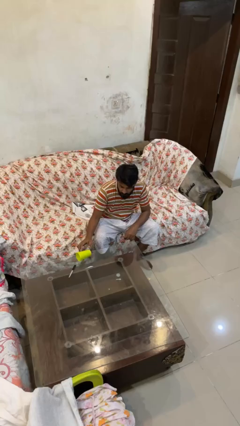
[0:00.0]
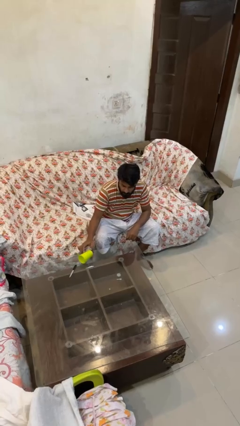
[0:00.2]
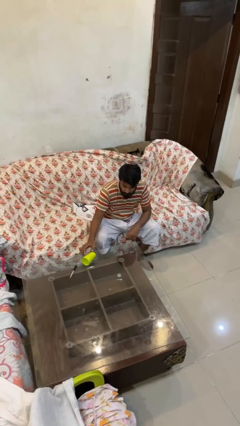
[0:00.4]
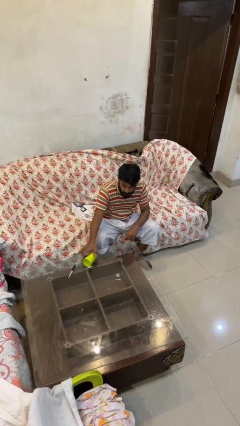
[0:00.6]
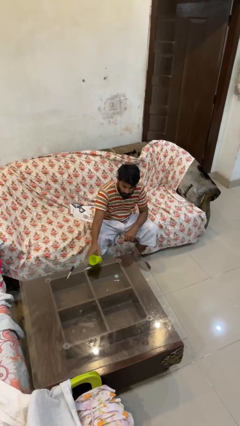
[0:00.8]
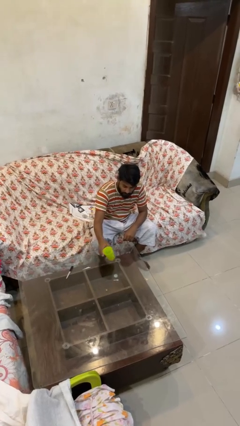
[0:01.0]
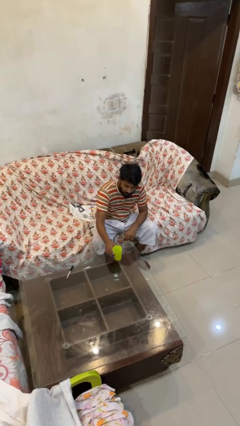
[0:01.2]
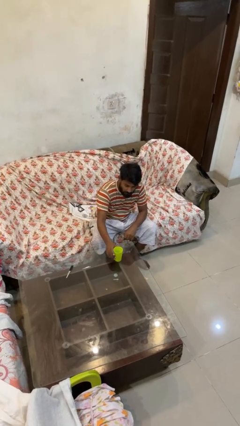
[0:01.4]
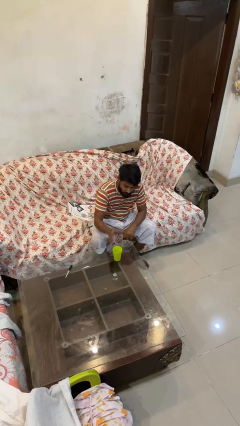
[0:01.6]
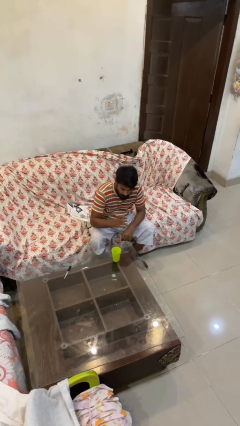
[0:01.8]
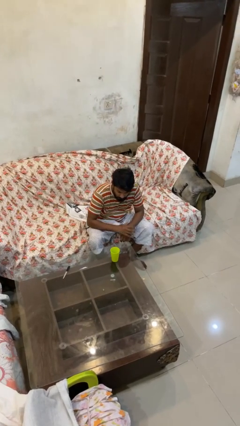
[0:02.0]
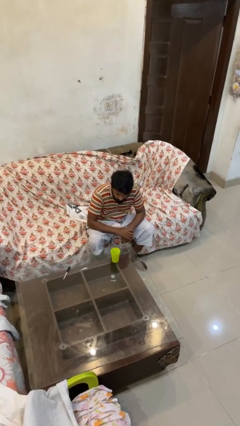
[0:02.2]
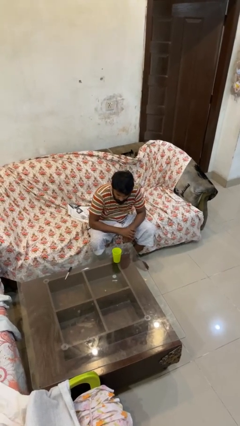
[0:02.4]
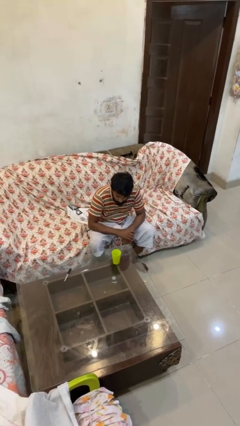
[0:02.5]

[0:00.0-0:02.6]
person sets upright glass

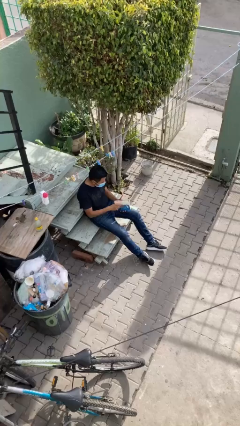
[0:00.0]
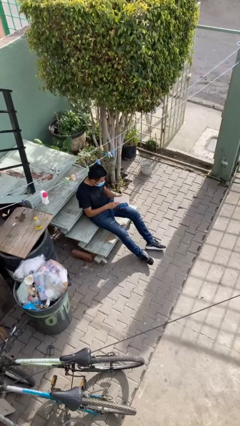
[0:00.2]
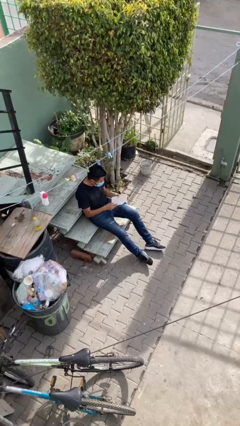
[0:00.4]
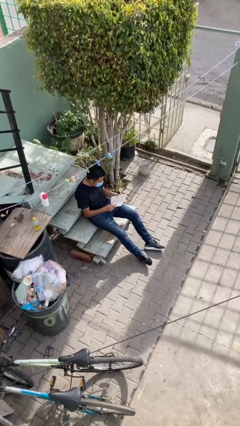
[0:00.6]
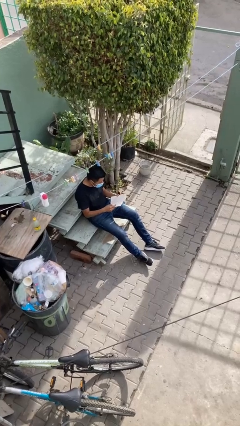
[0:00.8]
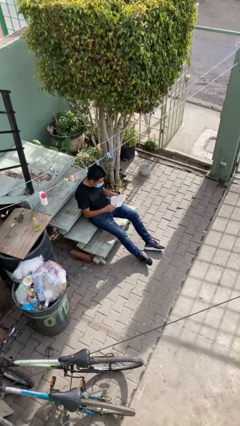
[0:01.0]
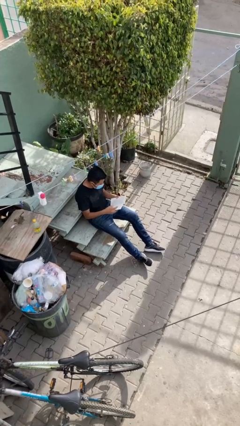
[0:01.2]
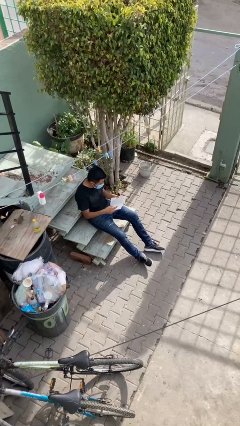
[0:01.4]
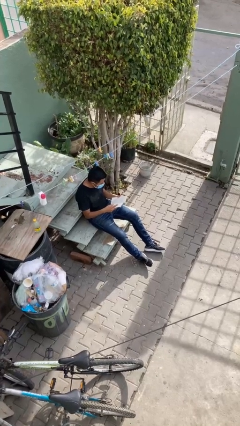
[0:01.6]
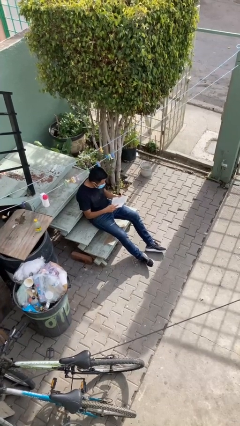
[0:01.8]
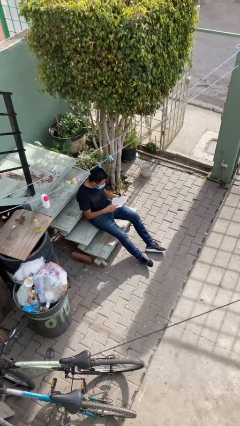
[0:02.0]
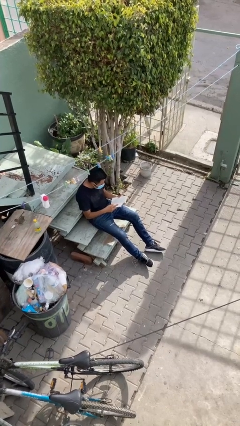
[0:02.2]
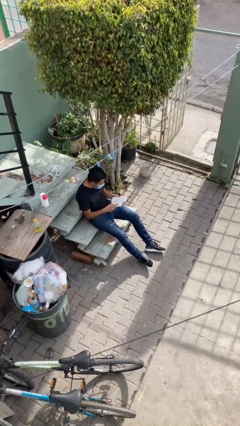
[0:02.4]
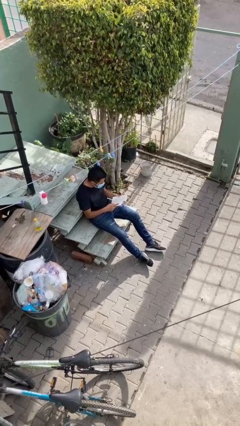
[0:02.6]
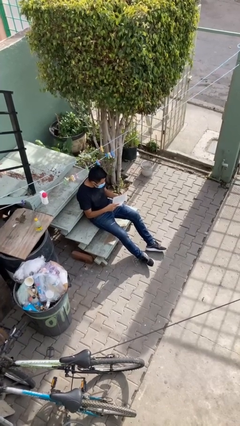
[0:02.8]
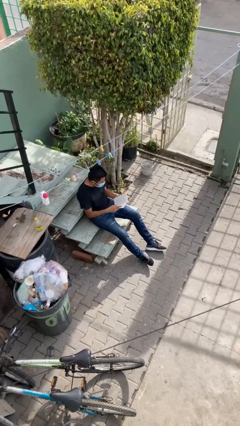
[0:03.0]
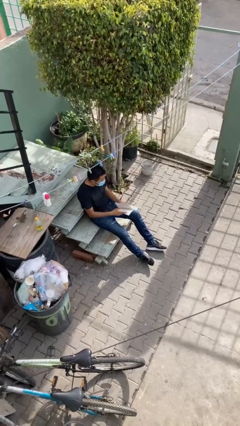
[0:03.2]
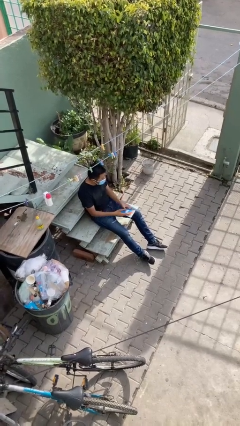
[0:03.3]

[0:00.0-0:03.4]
person reads document

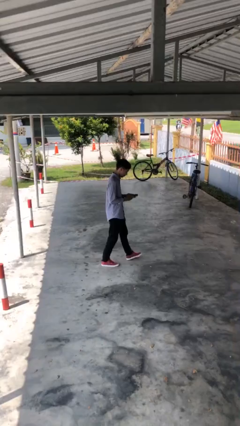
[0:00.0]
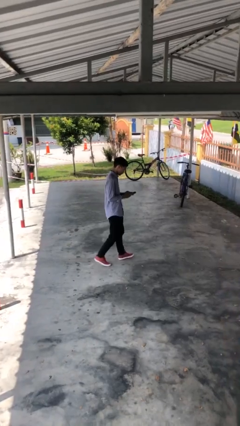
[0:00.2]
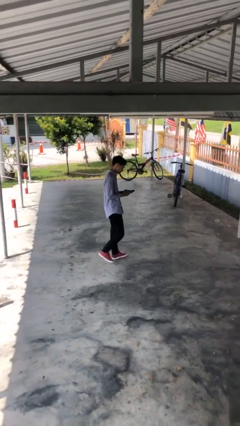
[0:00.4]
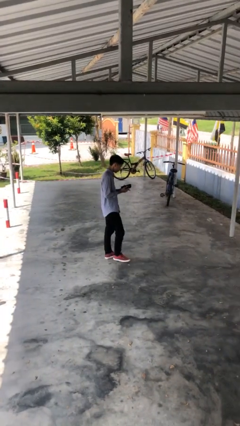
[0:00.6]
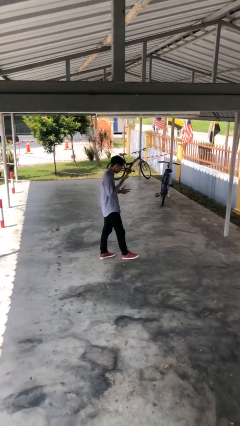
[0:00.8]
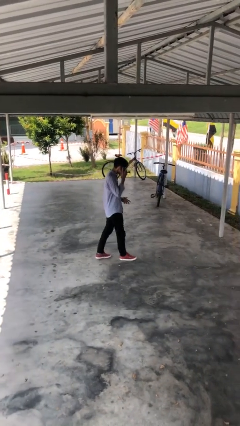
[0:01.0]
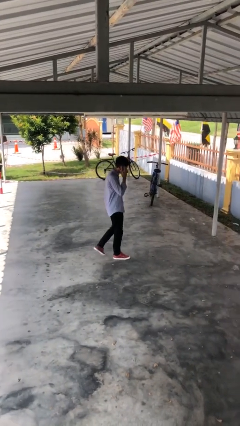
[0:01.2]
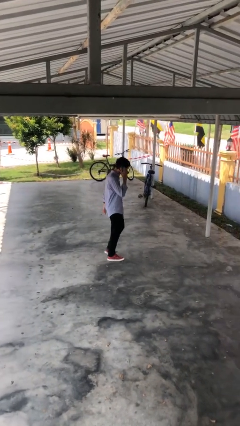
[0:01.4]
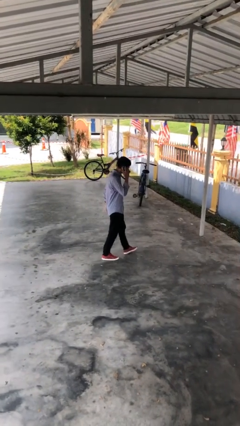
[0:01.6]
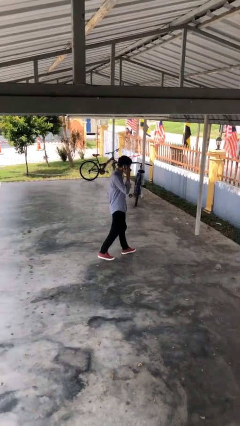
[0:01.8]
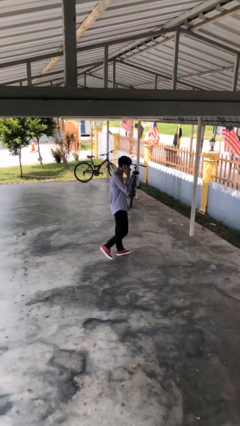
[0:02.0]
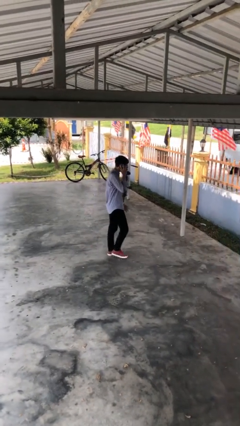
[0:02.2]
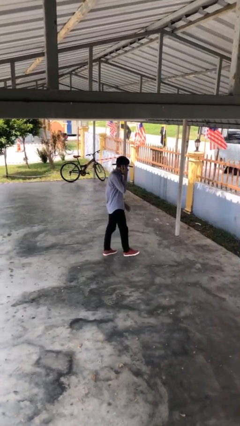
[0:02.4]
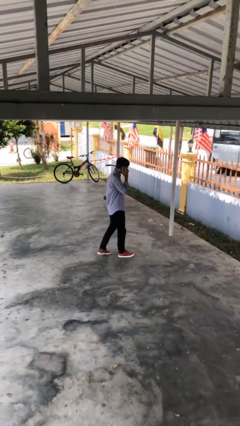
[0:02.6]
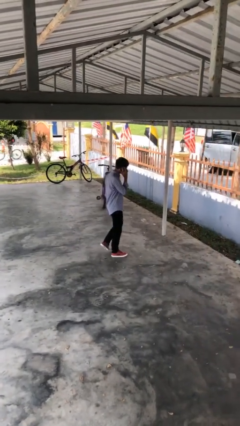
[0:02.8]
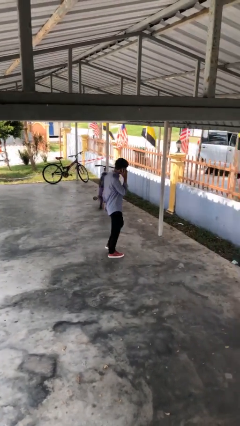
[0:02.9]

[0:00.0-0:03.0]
person talks on phone

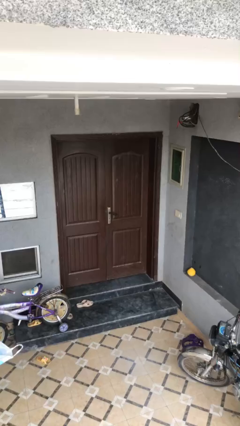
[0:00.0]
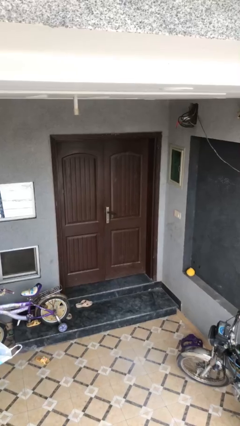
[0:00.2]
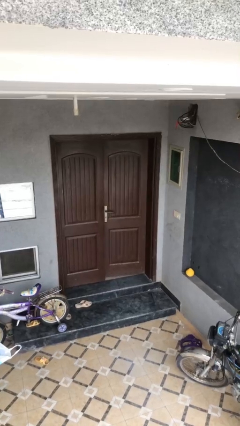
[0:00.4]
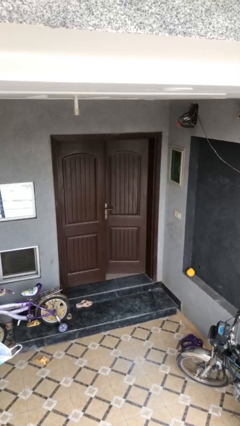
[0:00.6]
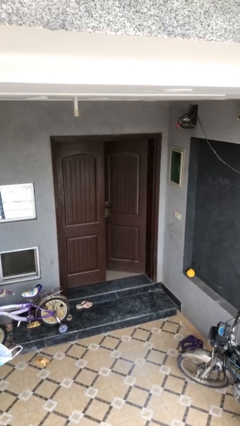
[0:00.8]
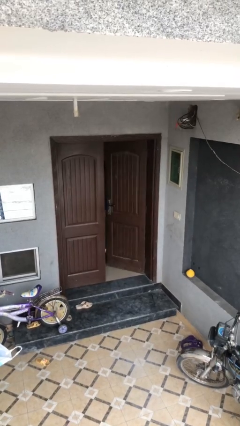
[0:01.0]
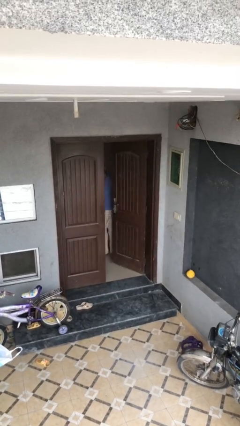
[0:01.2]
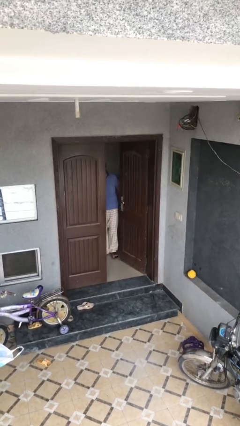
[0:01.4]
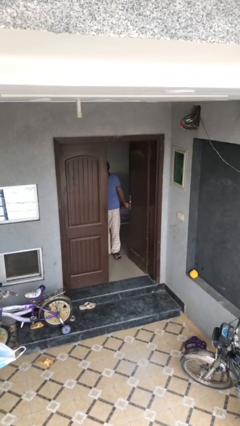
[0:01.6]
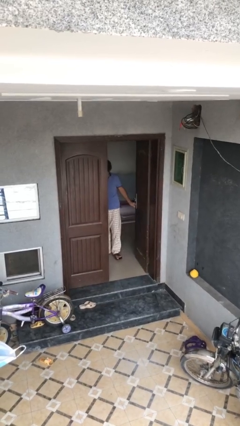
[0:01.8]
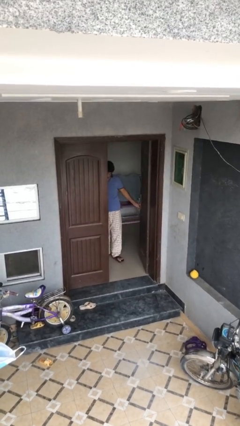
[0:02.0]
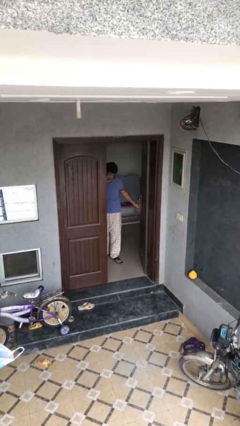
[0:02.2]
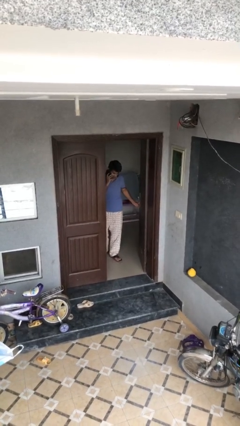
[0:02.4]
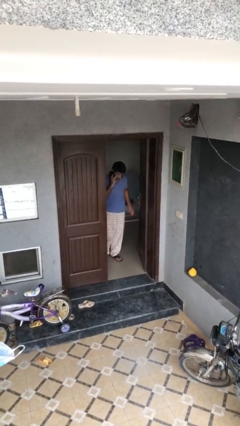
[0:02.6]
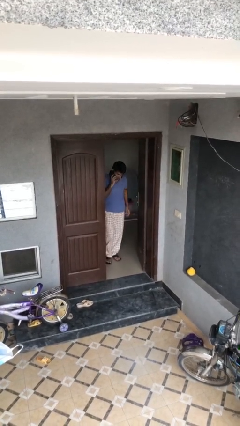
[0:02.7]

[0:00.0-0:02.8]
person opens facility door

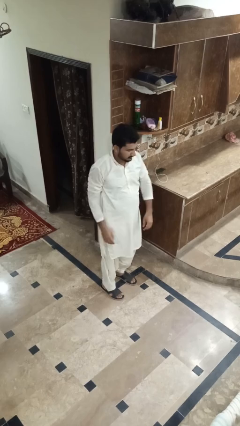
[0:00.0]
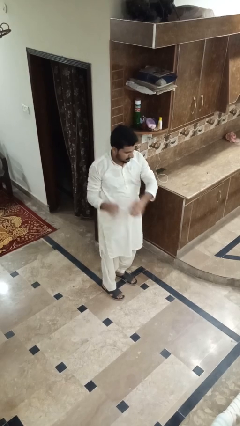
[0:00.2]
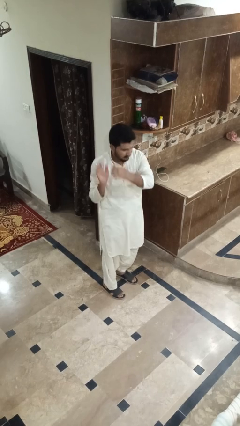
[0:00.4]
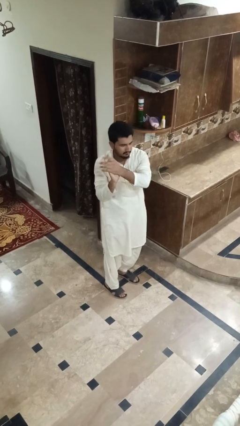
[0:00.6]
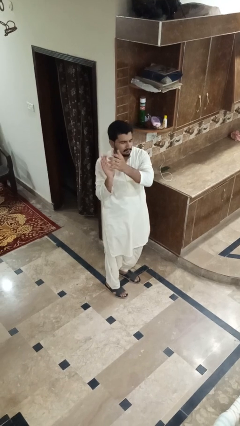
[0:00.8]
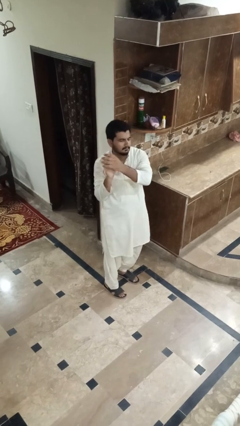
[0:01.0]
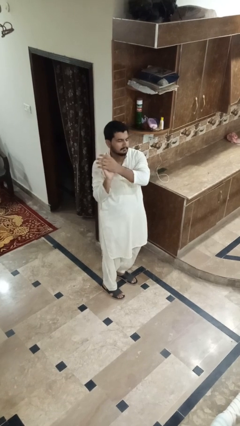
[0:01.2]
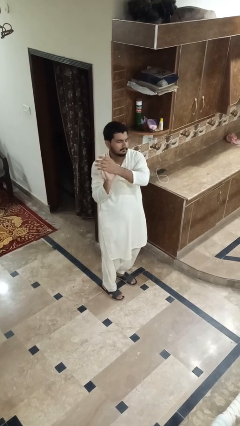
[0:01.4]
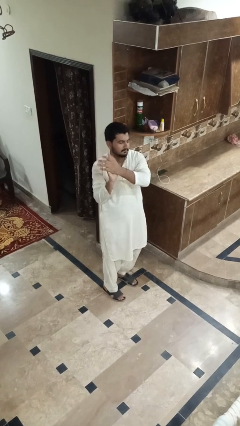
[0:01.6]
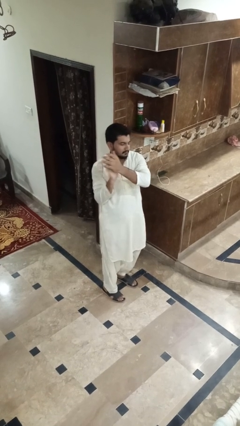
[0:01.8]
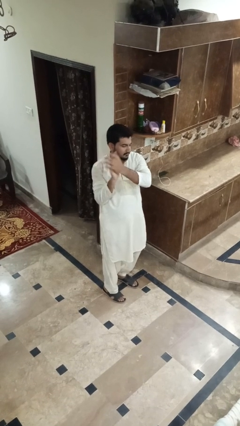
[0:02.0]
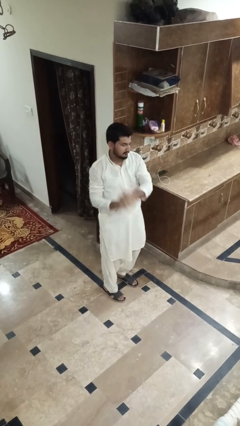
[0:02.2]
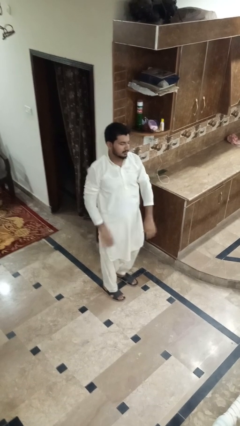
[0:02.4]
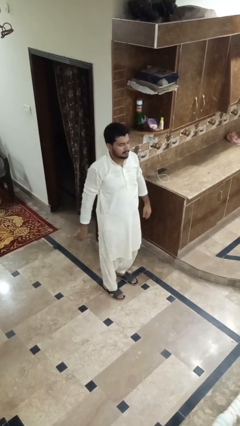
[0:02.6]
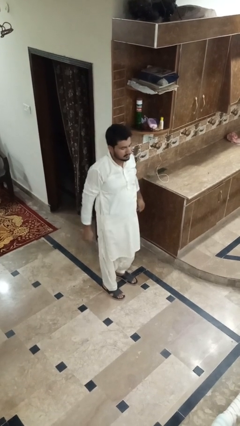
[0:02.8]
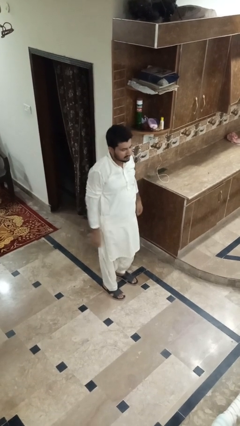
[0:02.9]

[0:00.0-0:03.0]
person claps hands

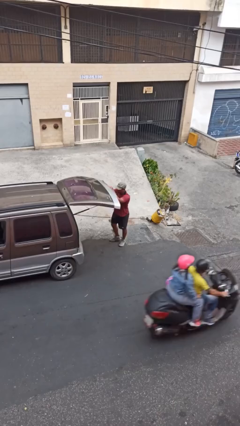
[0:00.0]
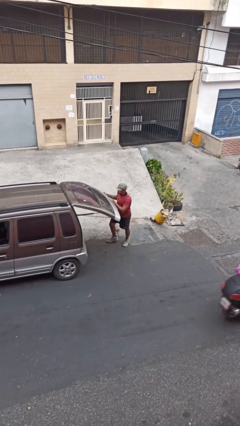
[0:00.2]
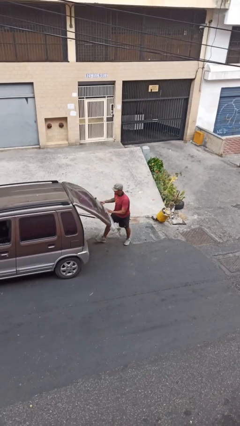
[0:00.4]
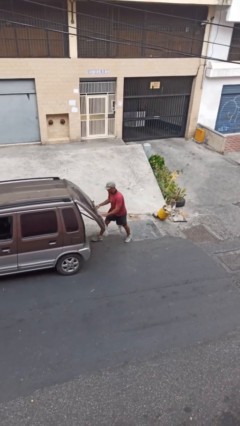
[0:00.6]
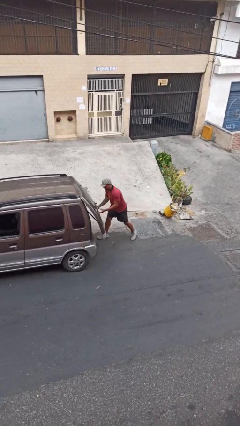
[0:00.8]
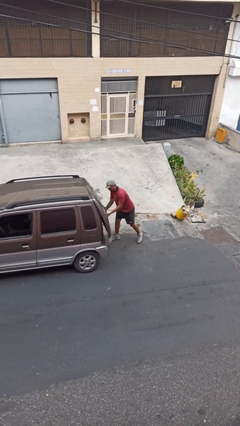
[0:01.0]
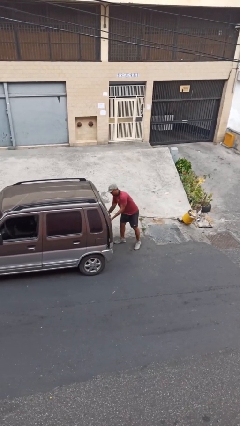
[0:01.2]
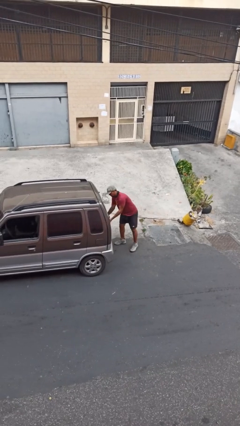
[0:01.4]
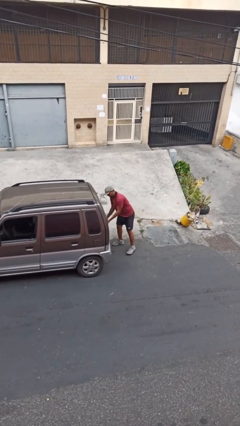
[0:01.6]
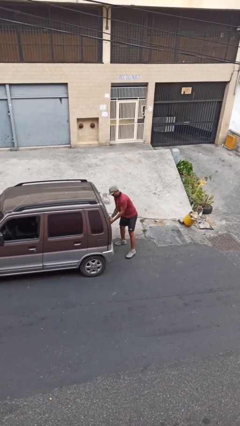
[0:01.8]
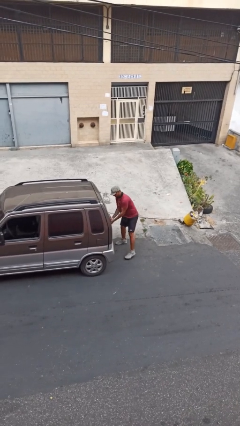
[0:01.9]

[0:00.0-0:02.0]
person closes car trunk

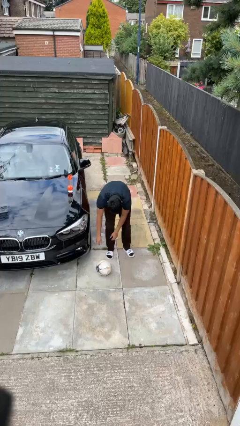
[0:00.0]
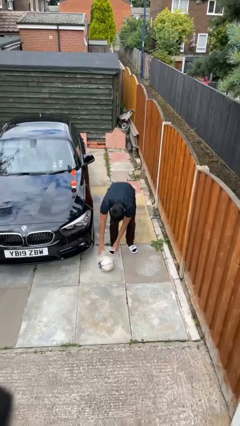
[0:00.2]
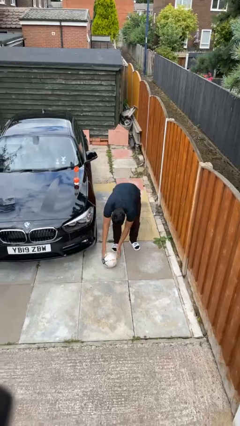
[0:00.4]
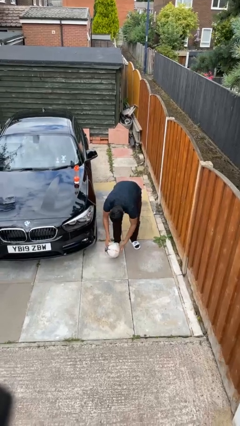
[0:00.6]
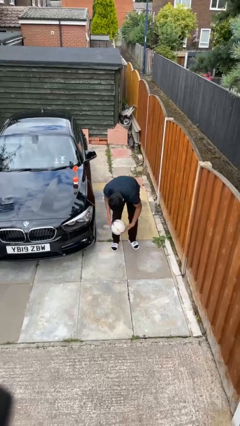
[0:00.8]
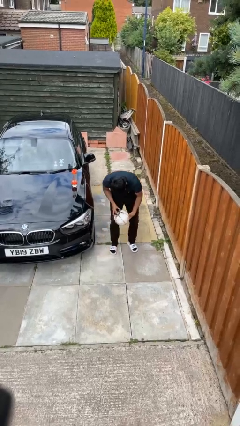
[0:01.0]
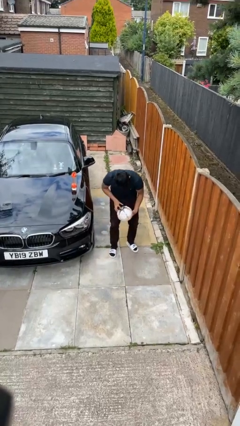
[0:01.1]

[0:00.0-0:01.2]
person picks up object from floor
